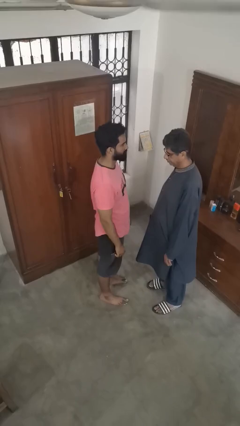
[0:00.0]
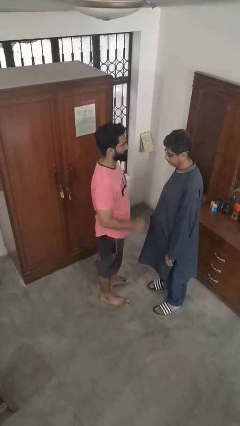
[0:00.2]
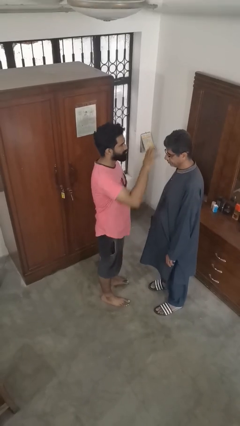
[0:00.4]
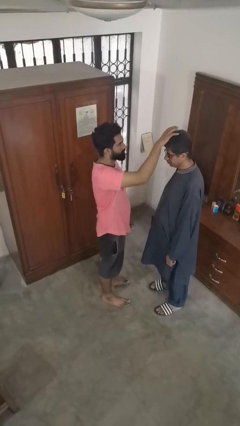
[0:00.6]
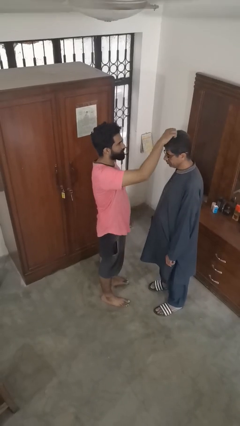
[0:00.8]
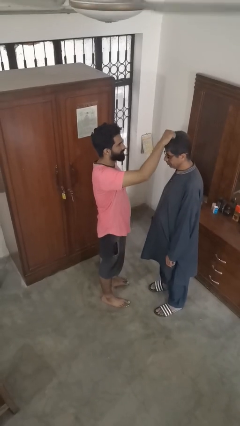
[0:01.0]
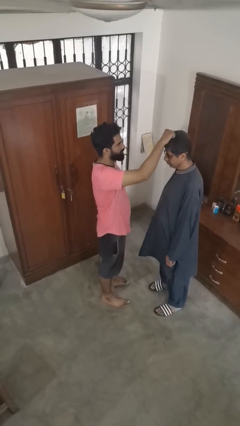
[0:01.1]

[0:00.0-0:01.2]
person grabs person by hair

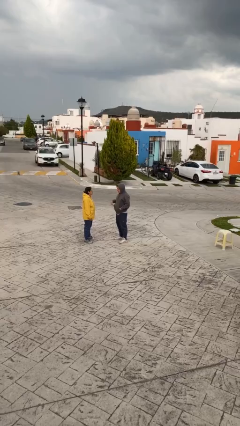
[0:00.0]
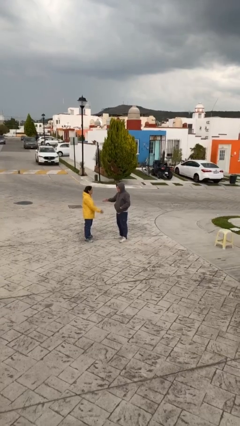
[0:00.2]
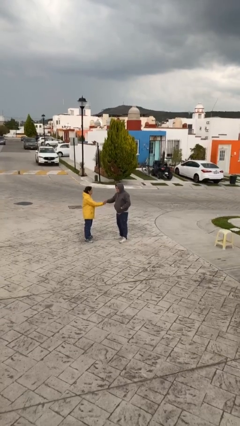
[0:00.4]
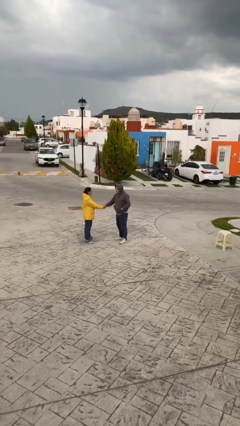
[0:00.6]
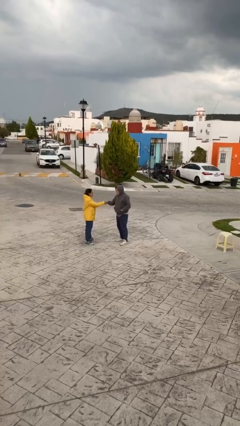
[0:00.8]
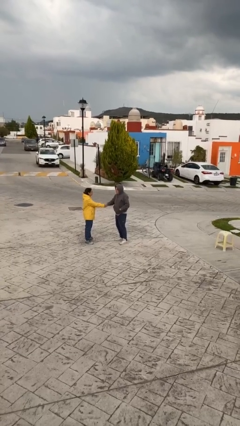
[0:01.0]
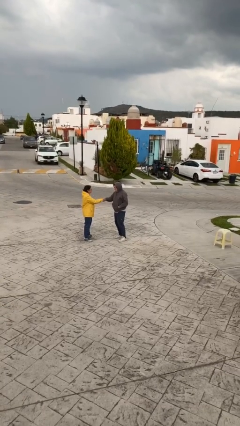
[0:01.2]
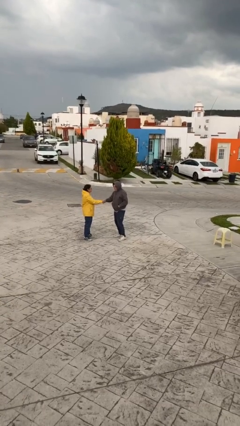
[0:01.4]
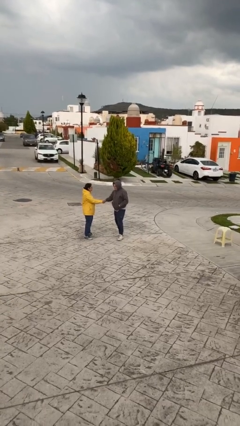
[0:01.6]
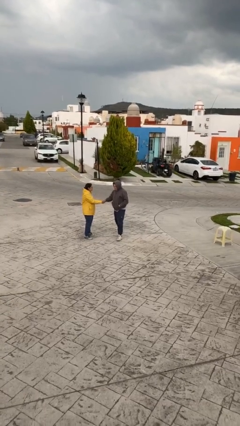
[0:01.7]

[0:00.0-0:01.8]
person shakes hand

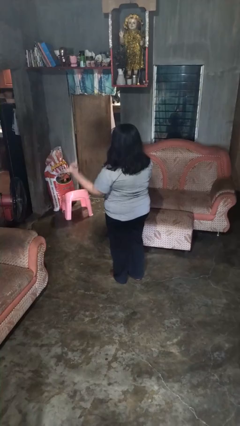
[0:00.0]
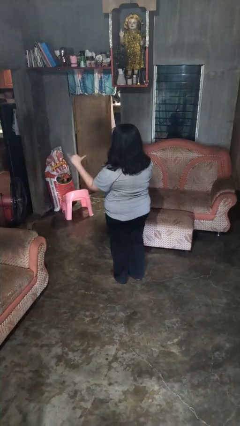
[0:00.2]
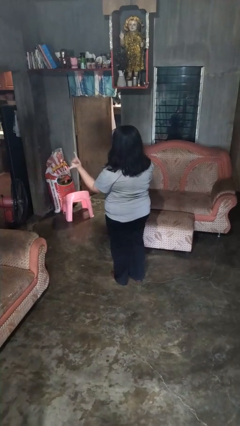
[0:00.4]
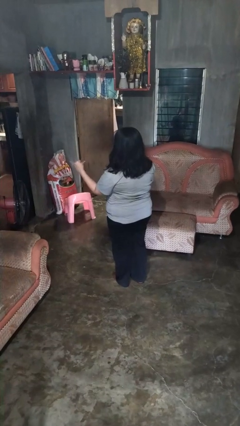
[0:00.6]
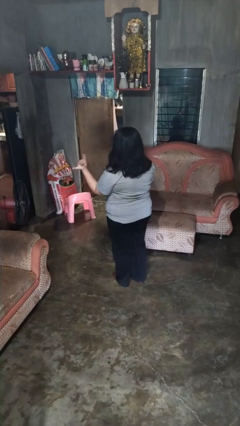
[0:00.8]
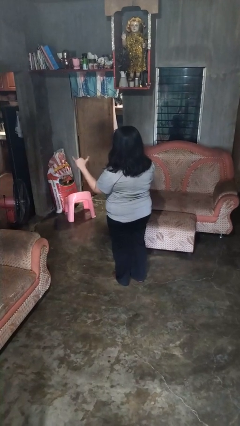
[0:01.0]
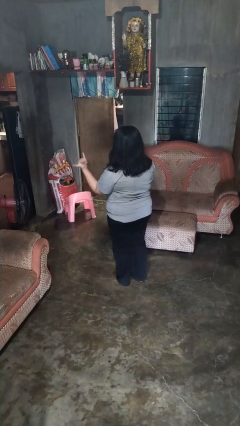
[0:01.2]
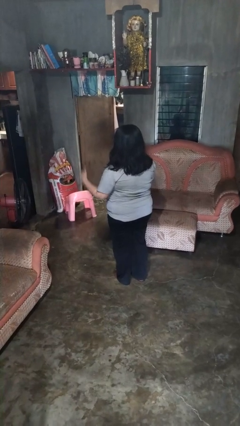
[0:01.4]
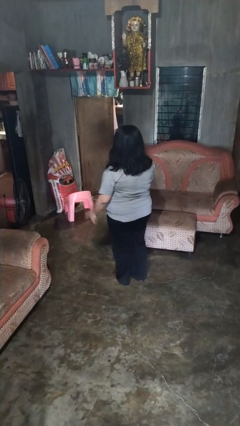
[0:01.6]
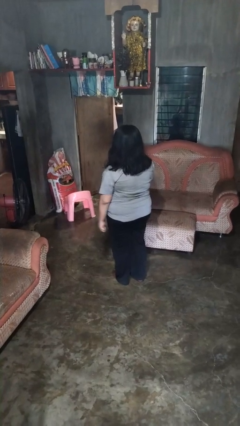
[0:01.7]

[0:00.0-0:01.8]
person gestures hang loose

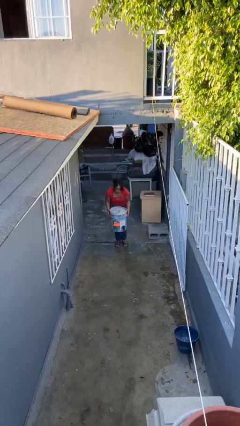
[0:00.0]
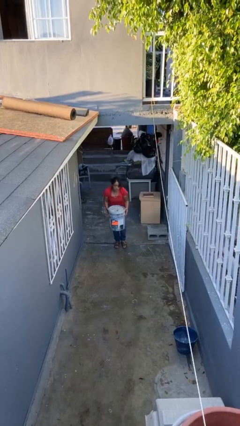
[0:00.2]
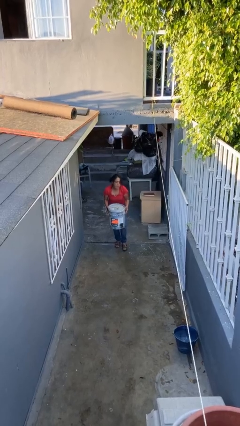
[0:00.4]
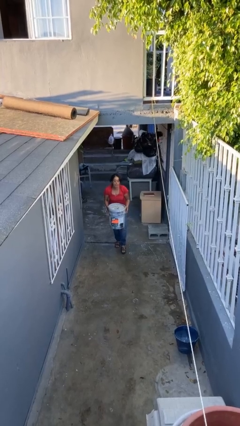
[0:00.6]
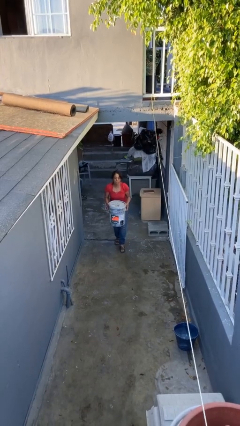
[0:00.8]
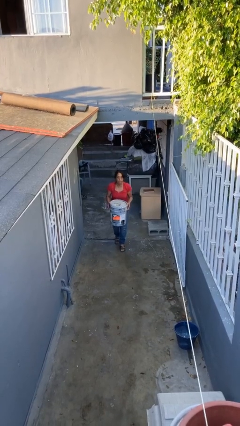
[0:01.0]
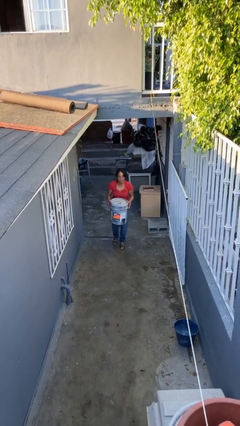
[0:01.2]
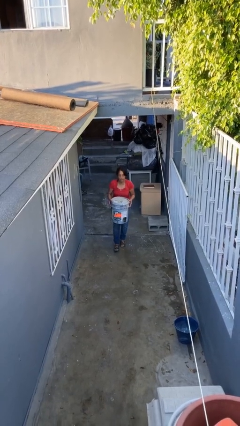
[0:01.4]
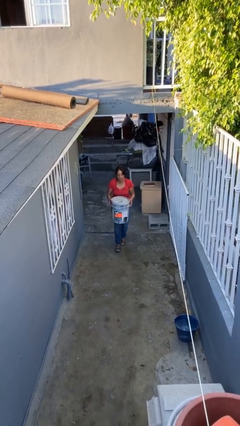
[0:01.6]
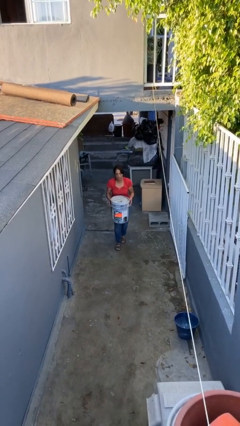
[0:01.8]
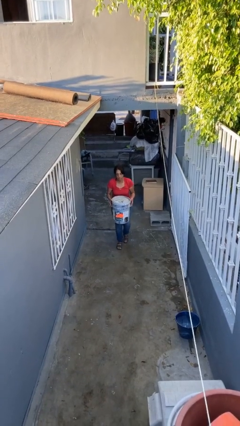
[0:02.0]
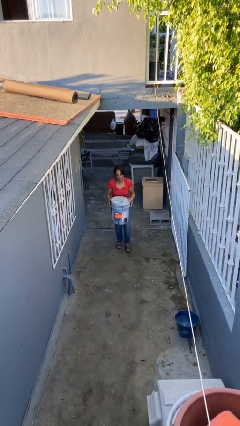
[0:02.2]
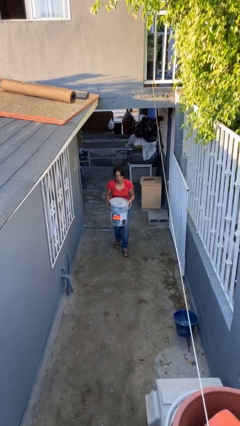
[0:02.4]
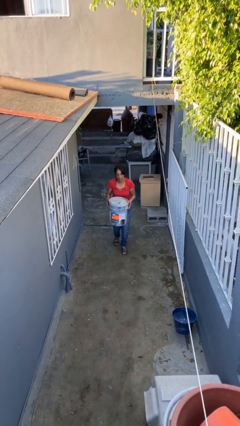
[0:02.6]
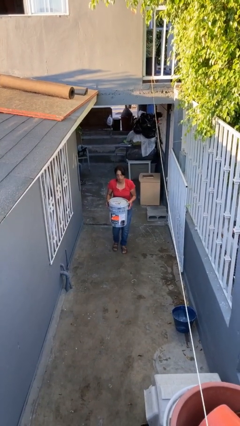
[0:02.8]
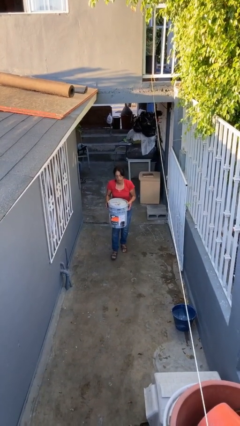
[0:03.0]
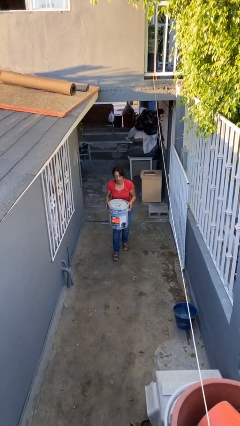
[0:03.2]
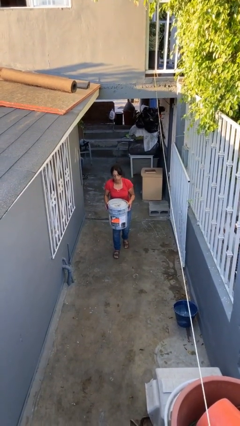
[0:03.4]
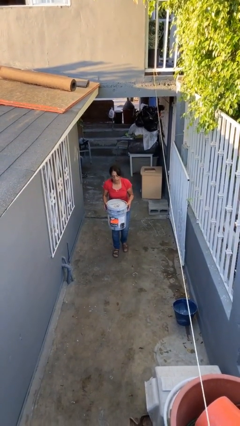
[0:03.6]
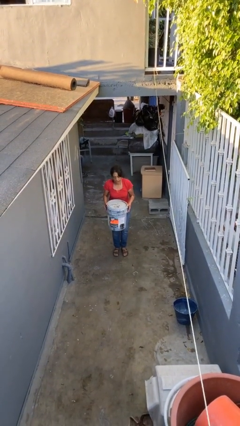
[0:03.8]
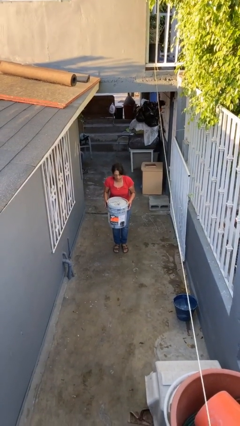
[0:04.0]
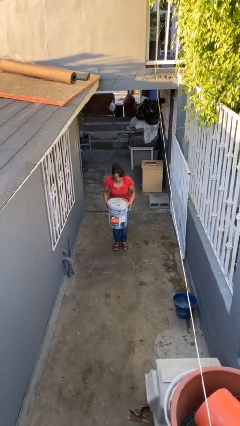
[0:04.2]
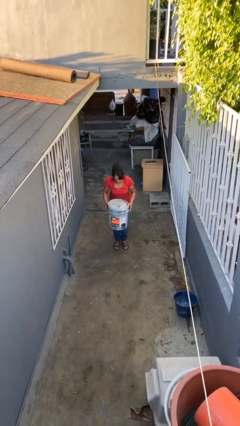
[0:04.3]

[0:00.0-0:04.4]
person carries heavy object

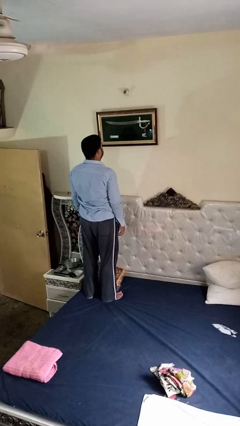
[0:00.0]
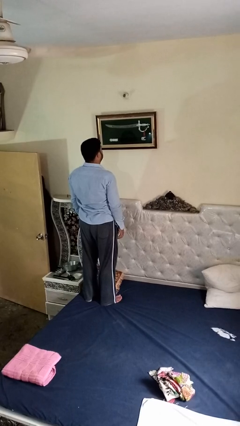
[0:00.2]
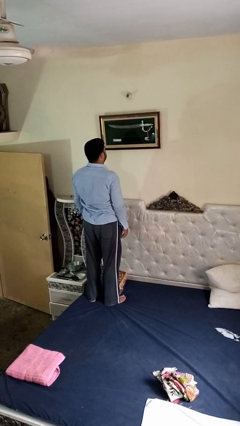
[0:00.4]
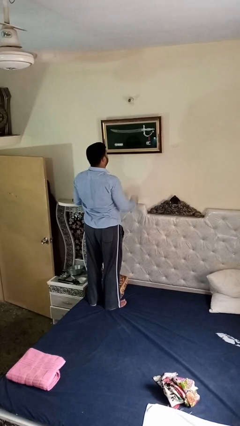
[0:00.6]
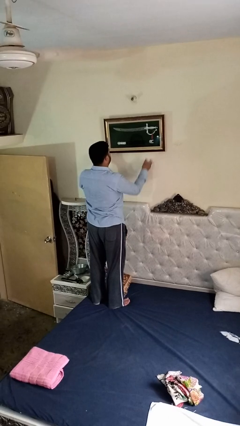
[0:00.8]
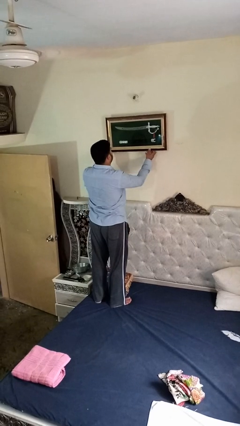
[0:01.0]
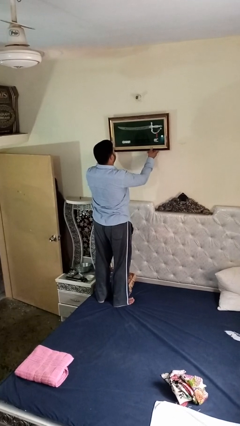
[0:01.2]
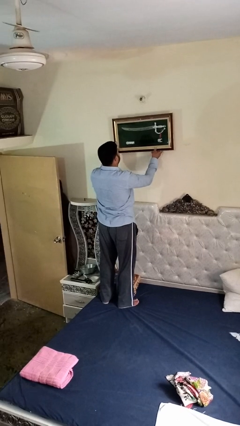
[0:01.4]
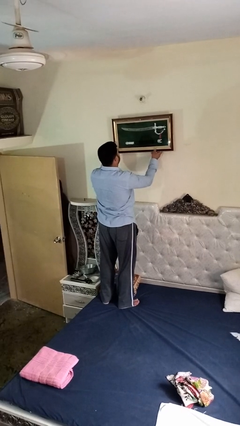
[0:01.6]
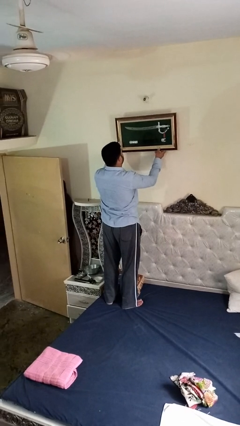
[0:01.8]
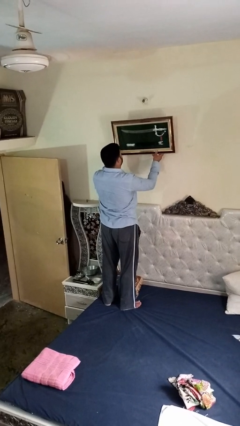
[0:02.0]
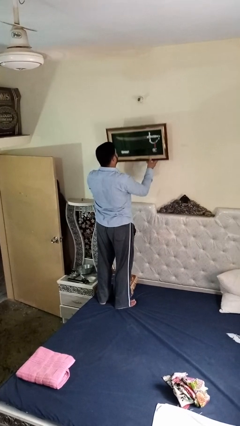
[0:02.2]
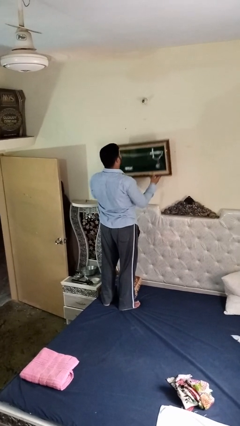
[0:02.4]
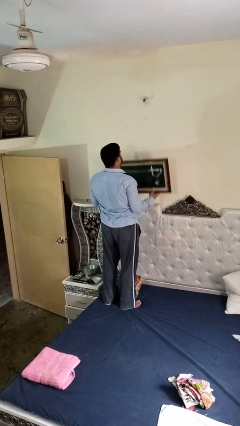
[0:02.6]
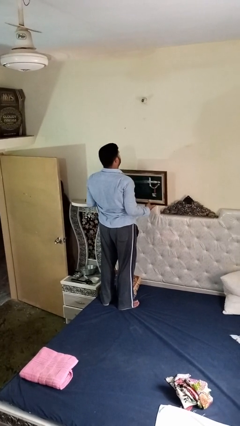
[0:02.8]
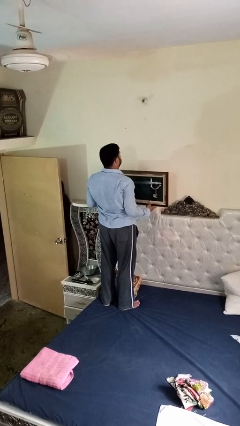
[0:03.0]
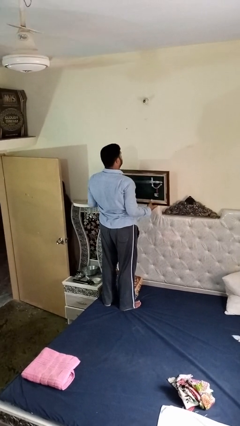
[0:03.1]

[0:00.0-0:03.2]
person takes down picture frame

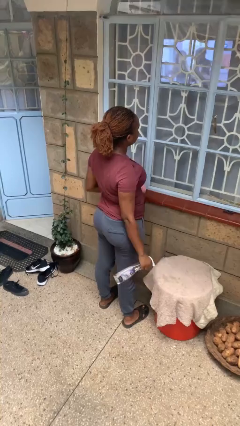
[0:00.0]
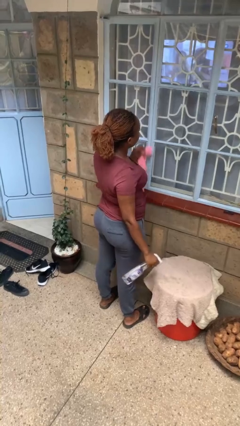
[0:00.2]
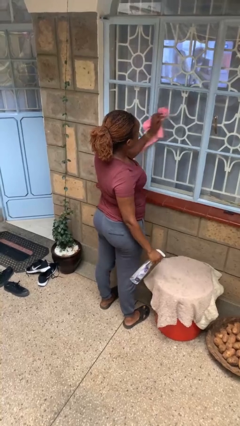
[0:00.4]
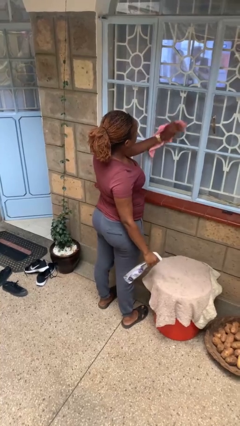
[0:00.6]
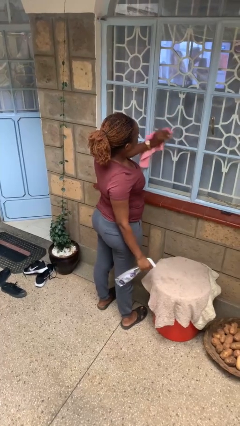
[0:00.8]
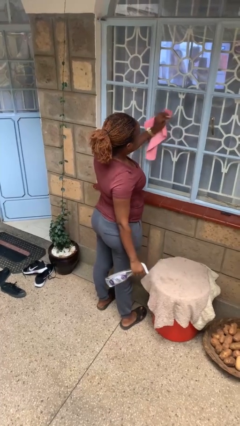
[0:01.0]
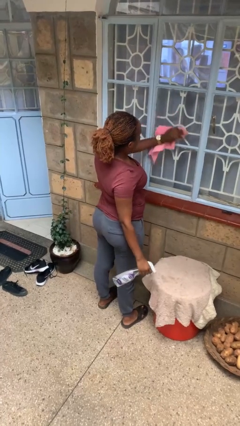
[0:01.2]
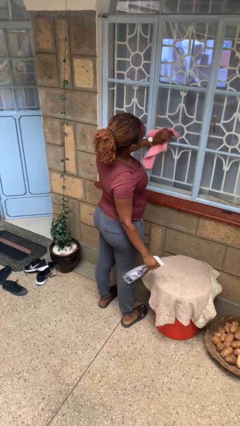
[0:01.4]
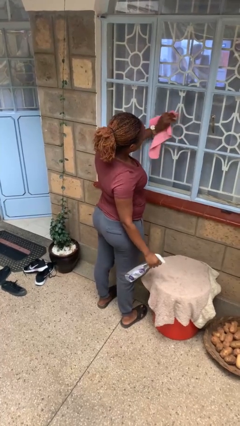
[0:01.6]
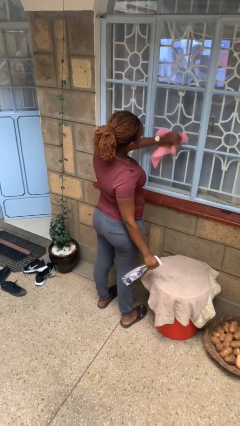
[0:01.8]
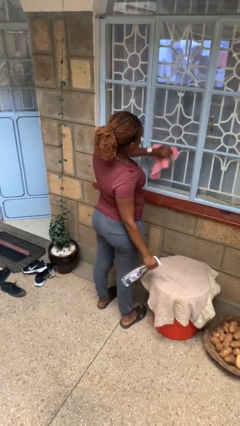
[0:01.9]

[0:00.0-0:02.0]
person washes window

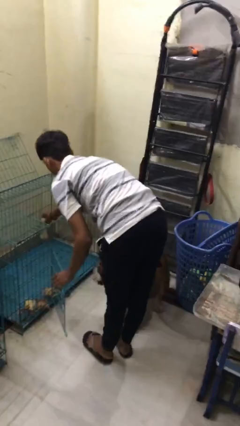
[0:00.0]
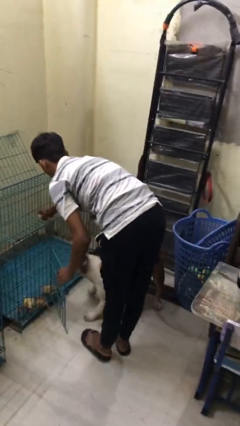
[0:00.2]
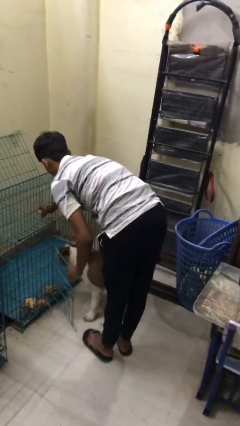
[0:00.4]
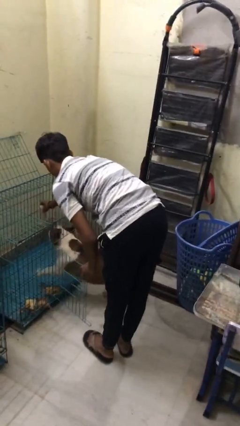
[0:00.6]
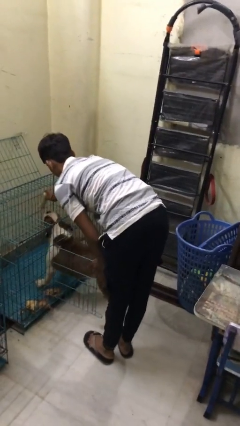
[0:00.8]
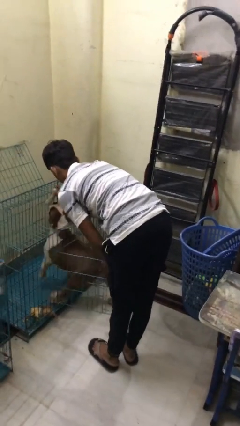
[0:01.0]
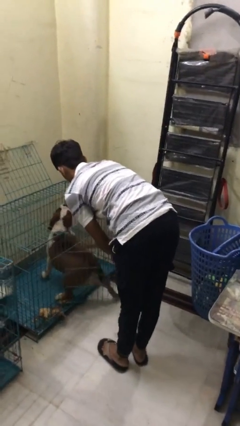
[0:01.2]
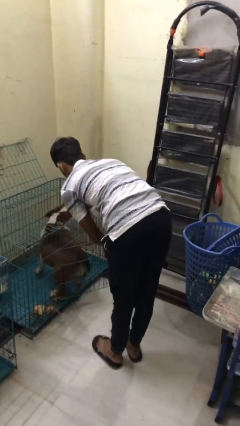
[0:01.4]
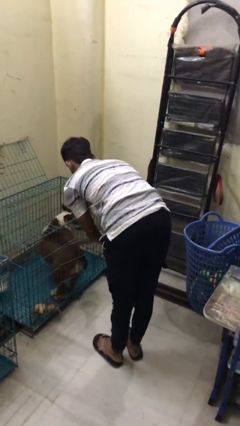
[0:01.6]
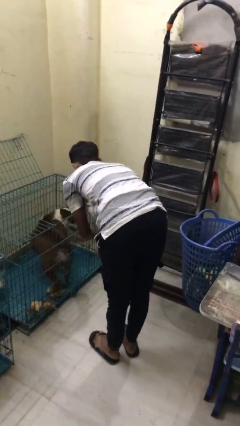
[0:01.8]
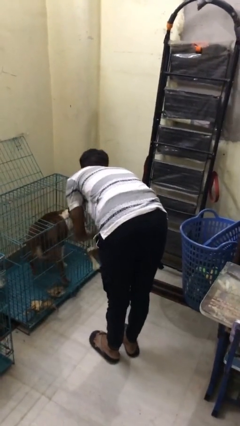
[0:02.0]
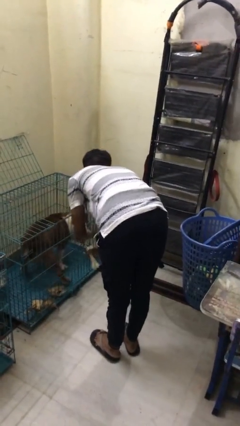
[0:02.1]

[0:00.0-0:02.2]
person crates dog

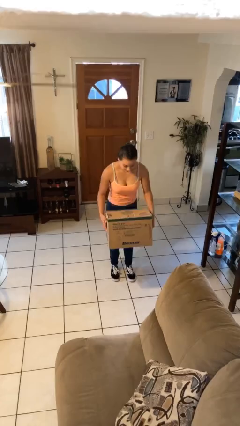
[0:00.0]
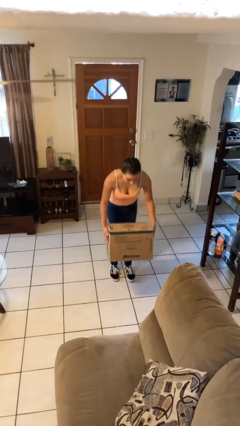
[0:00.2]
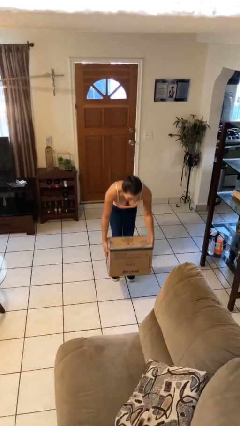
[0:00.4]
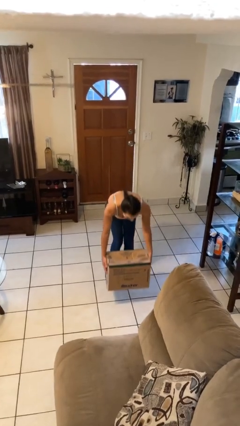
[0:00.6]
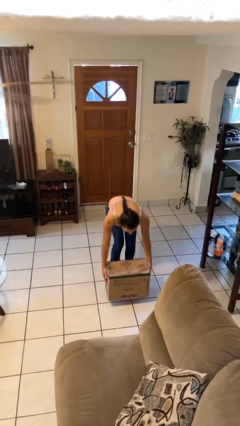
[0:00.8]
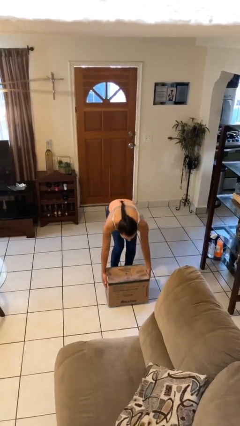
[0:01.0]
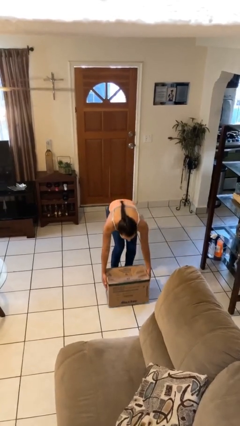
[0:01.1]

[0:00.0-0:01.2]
person puts down object on floor
